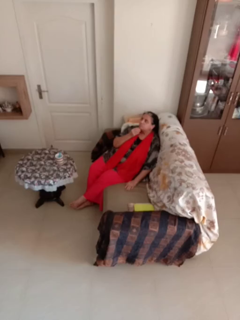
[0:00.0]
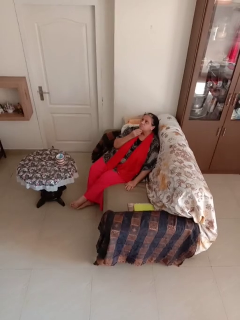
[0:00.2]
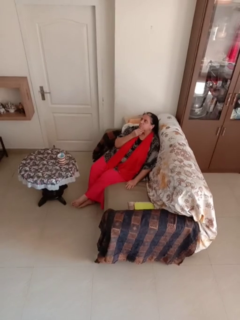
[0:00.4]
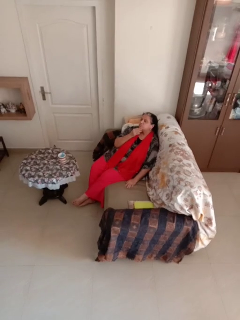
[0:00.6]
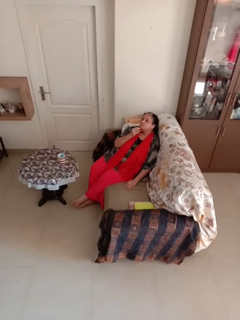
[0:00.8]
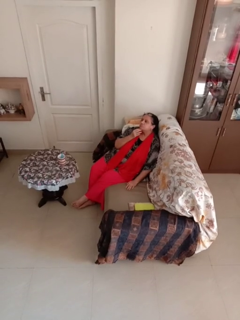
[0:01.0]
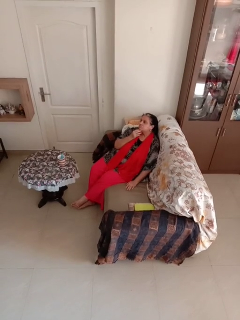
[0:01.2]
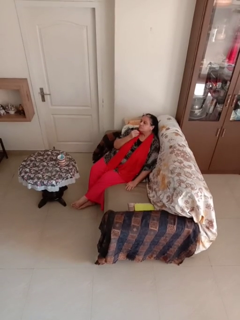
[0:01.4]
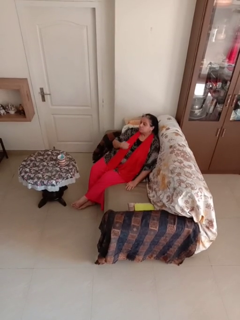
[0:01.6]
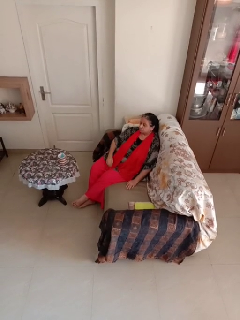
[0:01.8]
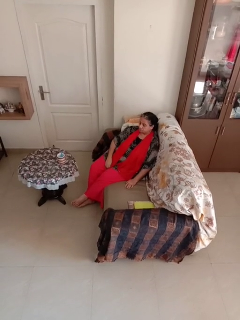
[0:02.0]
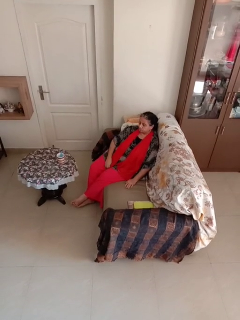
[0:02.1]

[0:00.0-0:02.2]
person strokes chin

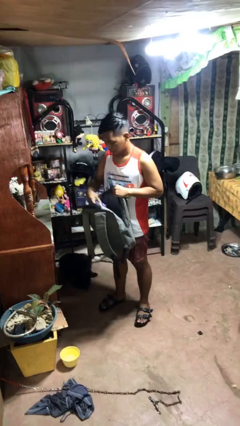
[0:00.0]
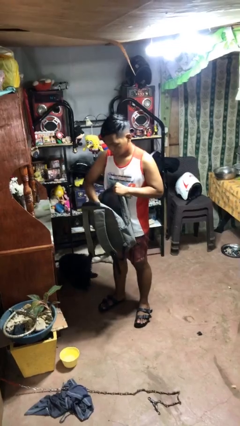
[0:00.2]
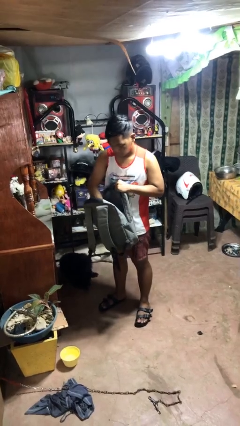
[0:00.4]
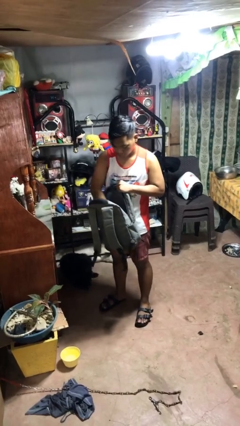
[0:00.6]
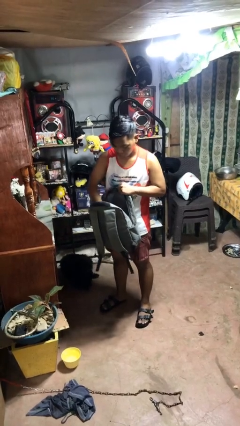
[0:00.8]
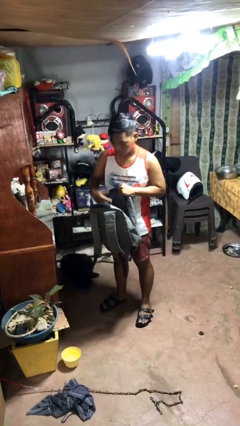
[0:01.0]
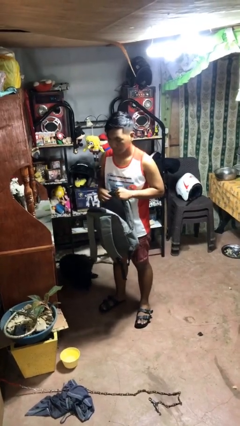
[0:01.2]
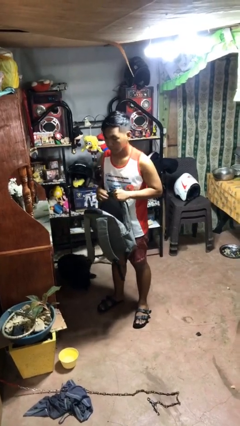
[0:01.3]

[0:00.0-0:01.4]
person puts object into bag

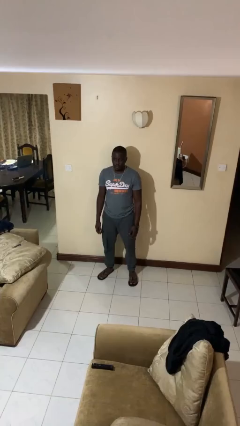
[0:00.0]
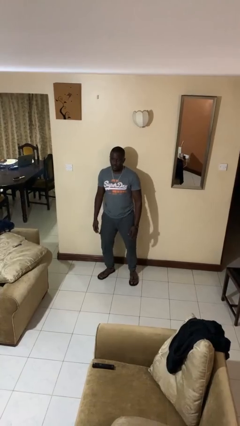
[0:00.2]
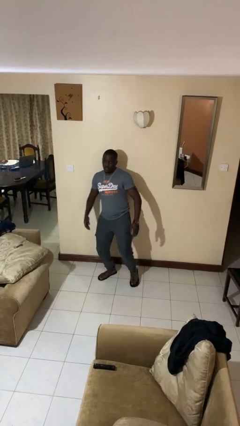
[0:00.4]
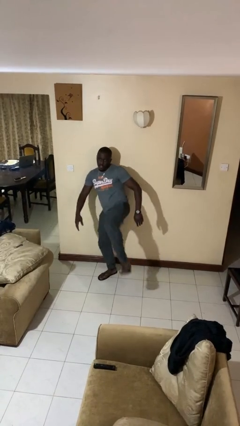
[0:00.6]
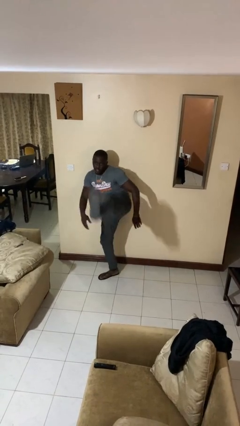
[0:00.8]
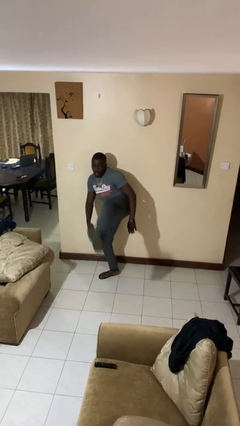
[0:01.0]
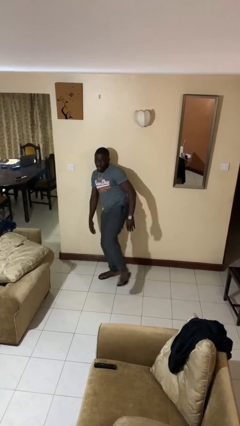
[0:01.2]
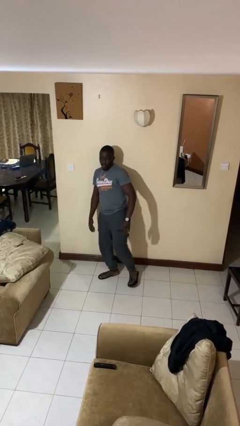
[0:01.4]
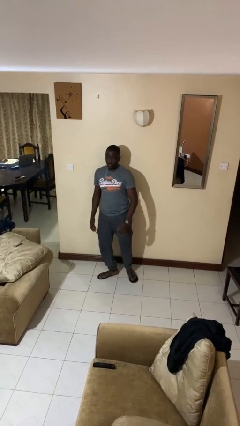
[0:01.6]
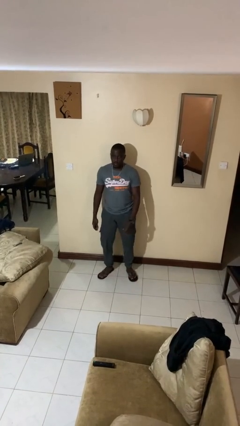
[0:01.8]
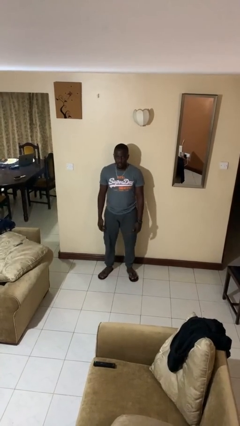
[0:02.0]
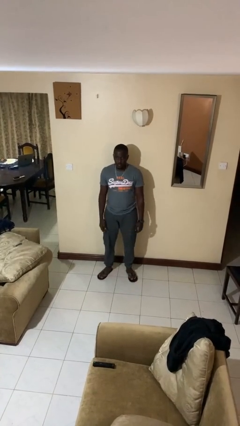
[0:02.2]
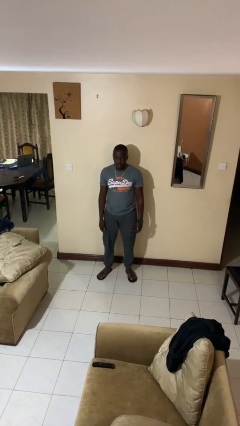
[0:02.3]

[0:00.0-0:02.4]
person karate kicks

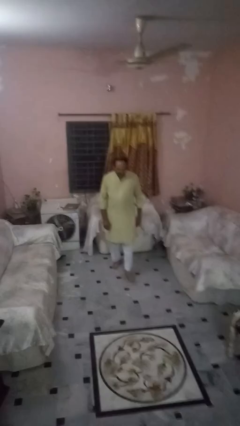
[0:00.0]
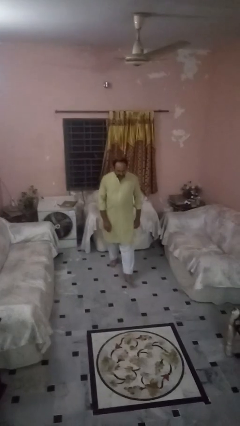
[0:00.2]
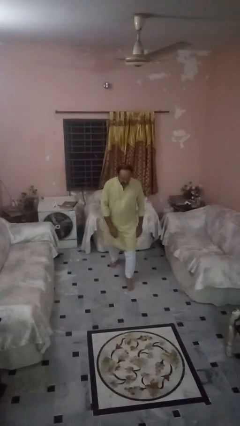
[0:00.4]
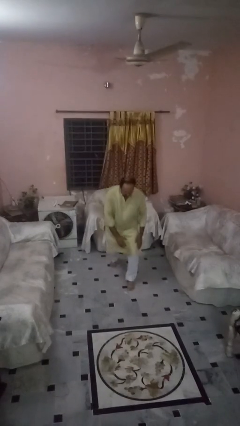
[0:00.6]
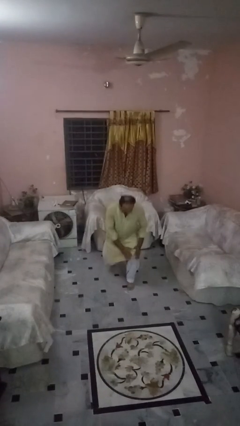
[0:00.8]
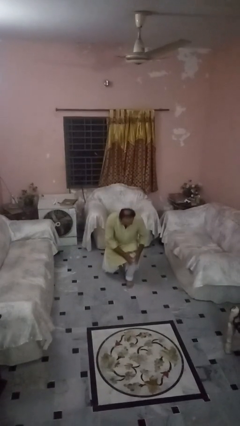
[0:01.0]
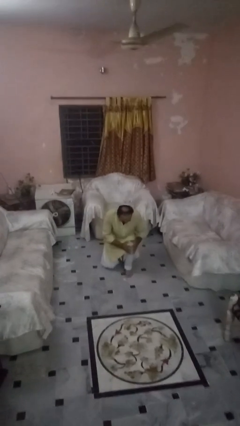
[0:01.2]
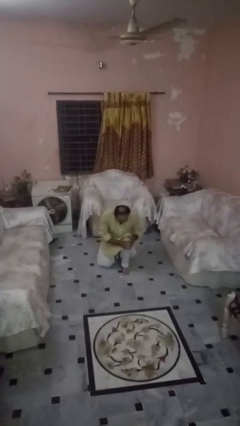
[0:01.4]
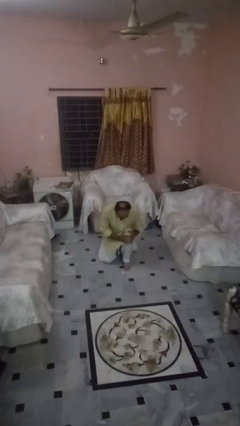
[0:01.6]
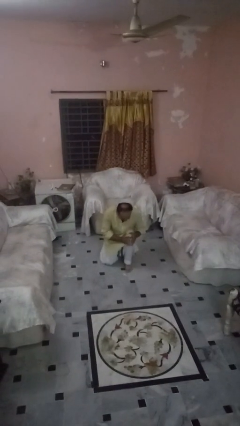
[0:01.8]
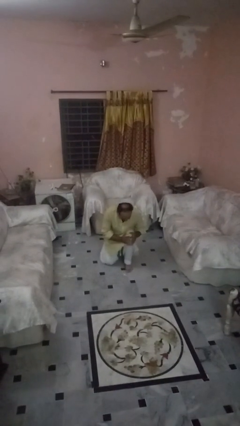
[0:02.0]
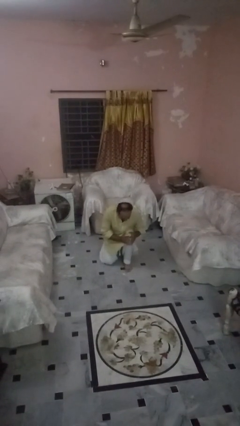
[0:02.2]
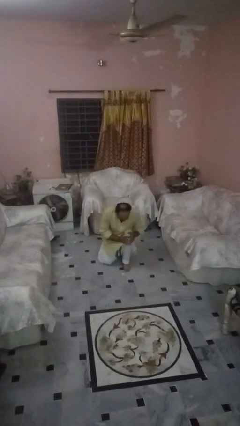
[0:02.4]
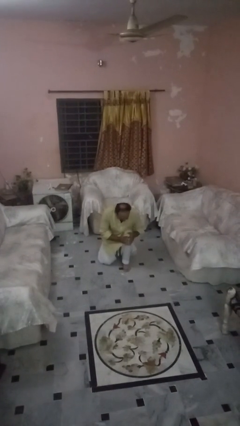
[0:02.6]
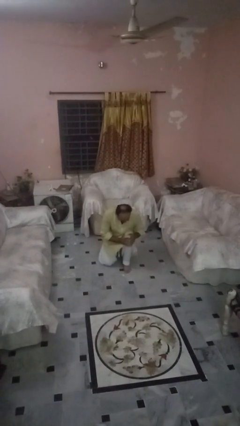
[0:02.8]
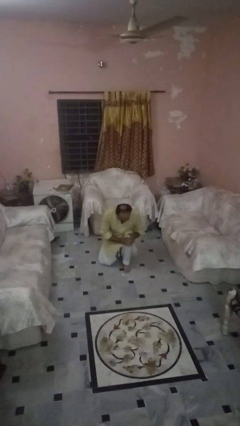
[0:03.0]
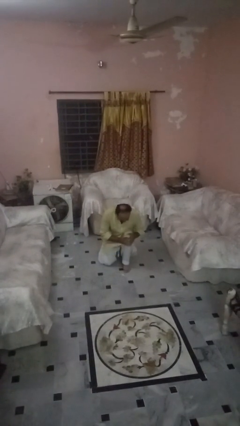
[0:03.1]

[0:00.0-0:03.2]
person exercises with lunges

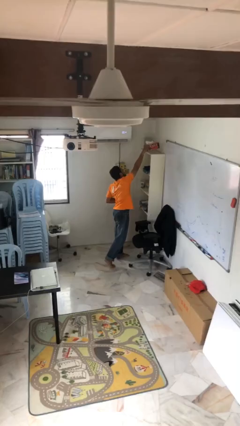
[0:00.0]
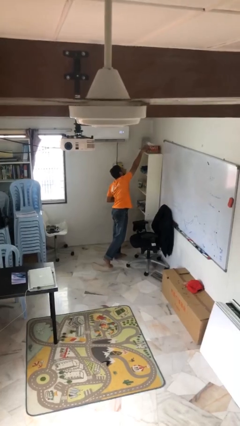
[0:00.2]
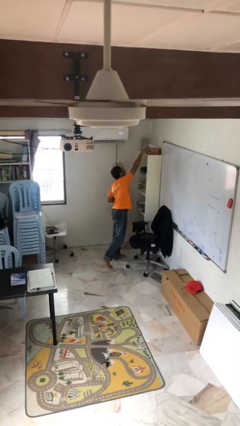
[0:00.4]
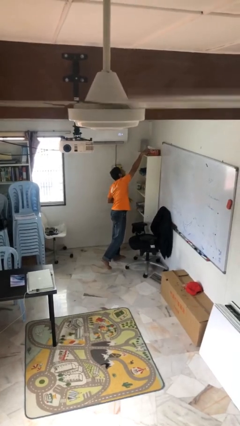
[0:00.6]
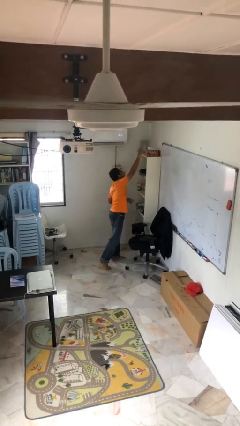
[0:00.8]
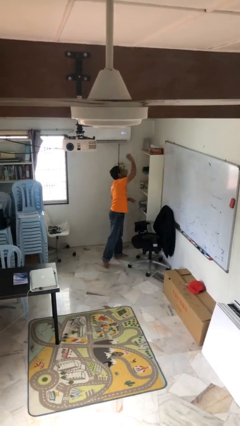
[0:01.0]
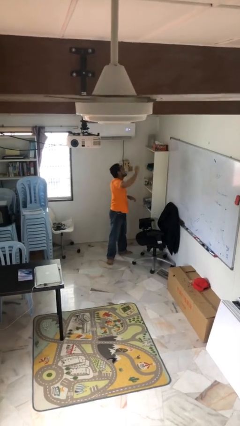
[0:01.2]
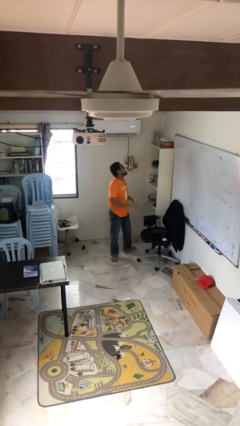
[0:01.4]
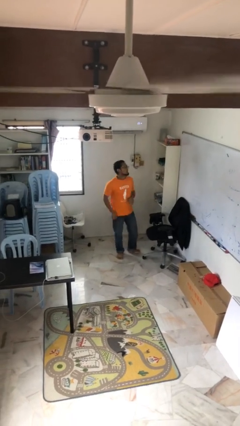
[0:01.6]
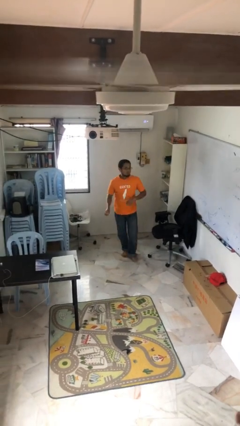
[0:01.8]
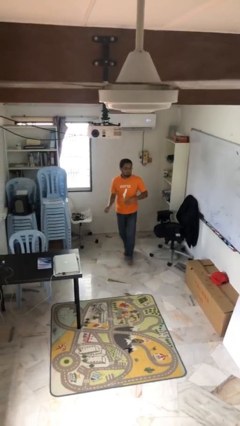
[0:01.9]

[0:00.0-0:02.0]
person puts down object on shelf

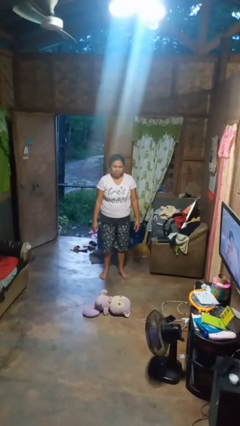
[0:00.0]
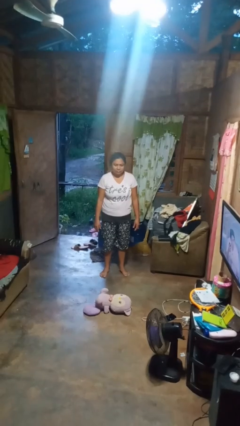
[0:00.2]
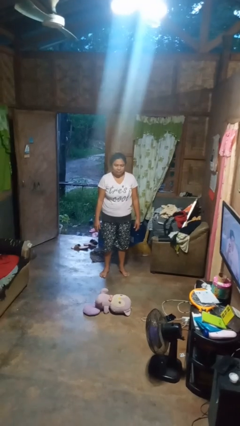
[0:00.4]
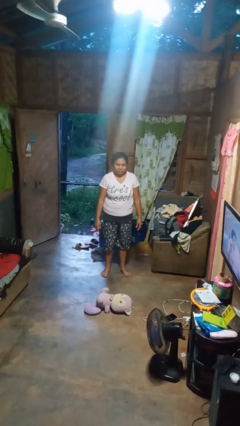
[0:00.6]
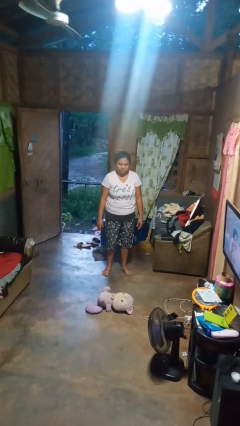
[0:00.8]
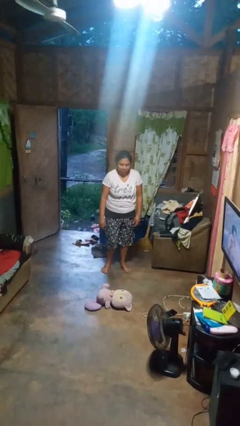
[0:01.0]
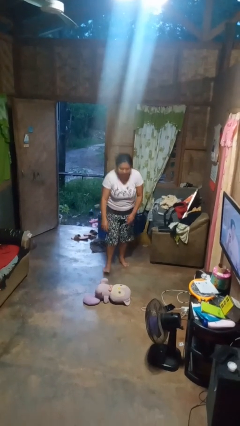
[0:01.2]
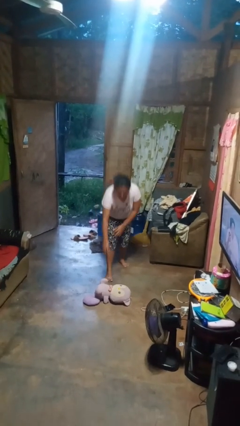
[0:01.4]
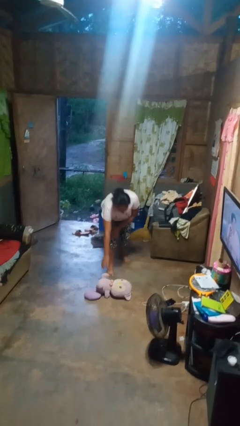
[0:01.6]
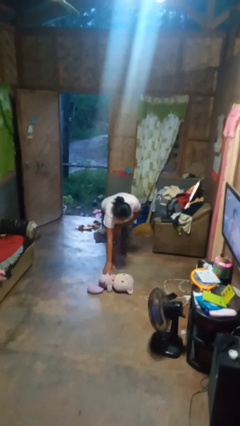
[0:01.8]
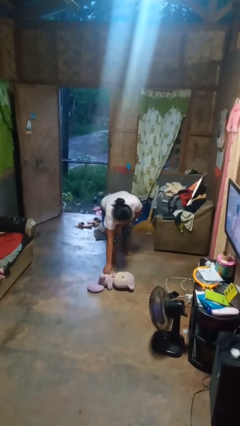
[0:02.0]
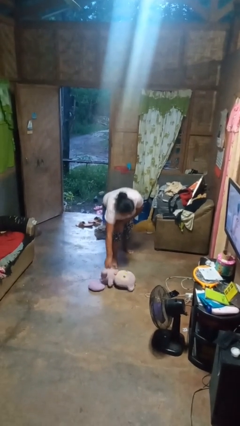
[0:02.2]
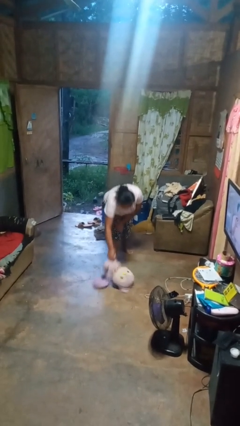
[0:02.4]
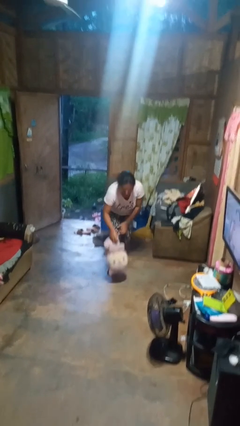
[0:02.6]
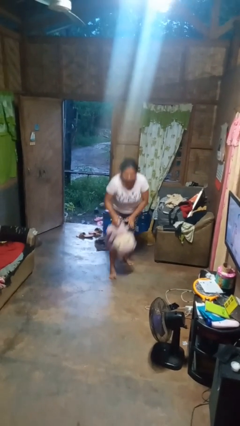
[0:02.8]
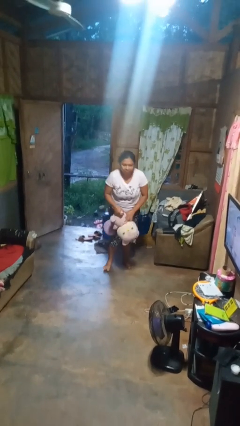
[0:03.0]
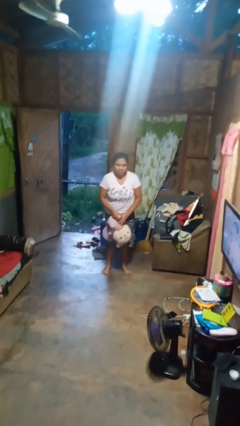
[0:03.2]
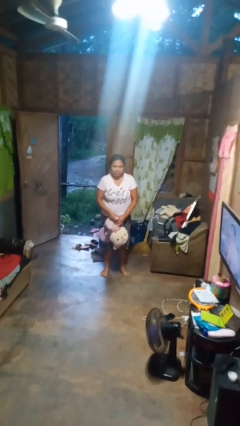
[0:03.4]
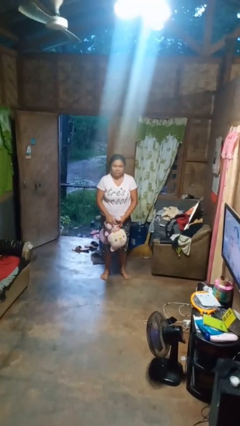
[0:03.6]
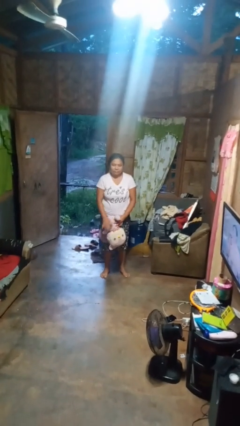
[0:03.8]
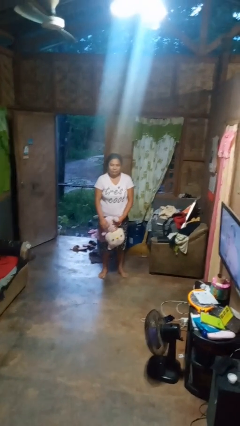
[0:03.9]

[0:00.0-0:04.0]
person picks up object from floor

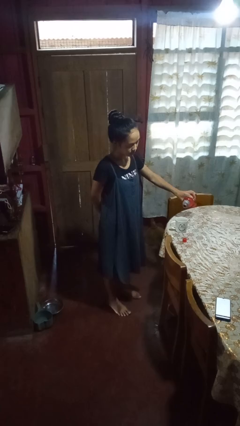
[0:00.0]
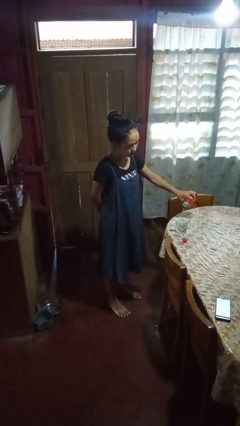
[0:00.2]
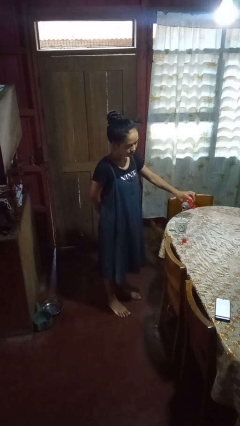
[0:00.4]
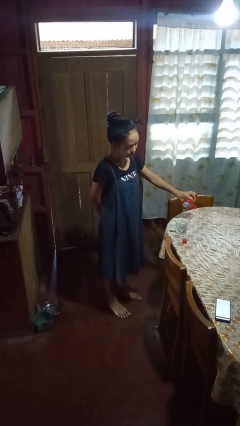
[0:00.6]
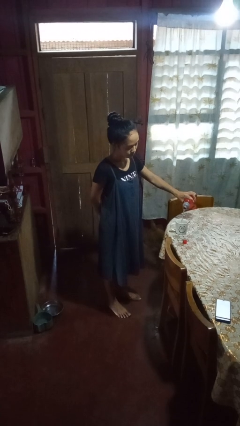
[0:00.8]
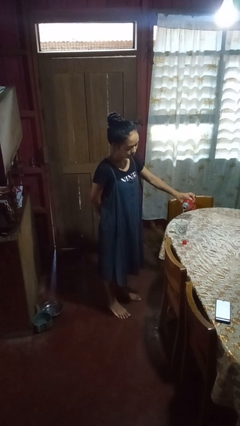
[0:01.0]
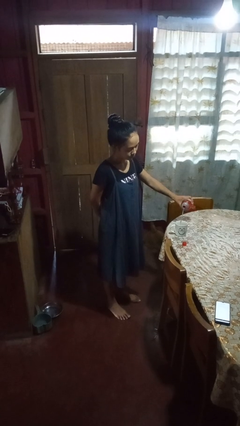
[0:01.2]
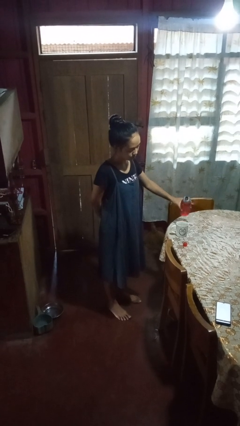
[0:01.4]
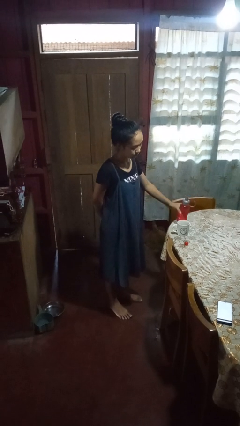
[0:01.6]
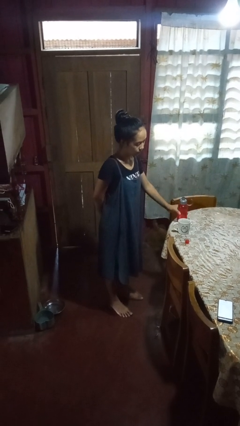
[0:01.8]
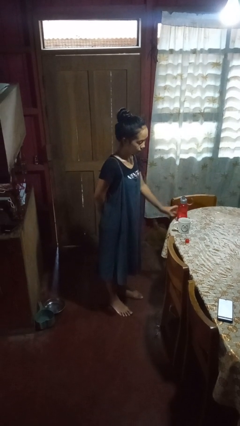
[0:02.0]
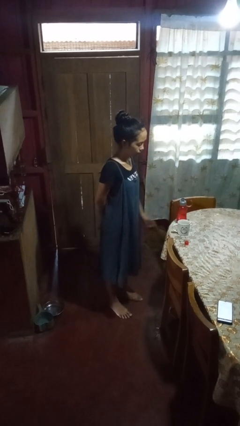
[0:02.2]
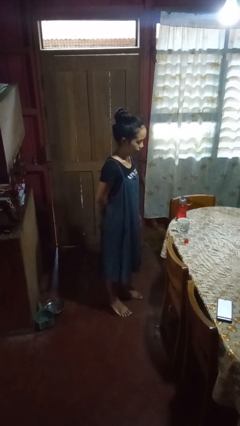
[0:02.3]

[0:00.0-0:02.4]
person pours liquid into cup

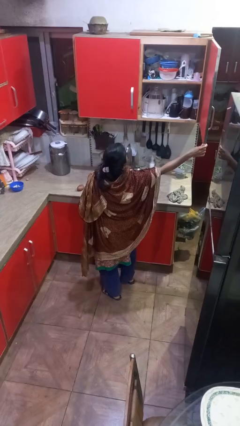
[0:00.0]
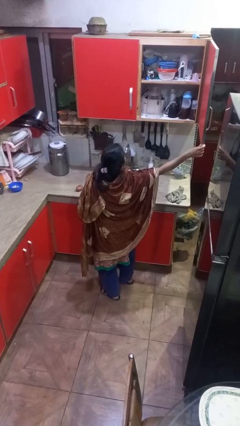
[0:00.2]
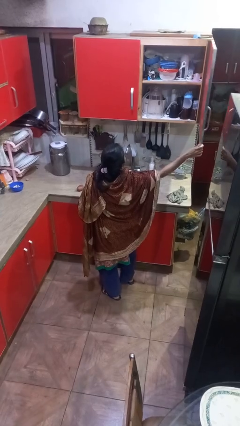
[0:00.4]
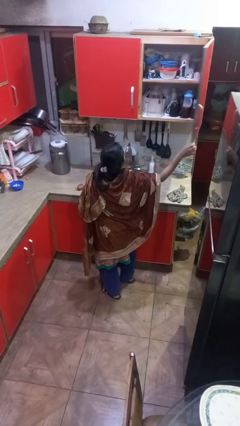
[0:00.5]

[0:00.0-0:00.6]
person closes cabinet
